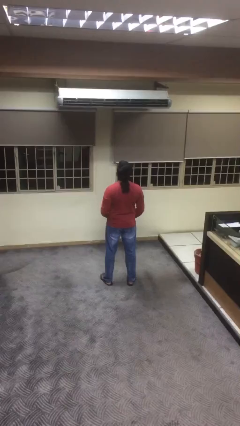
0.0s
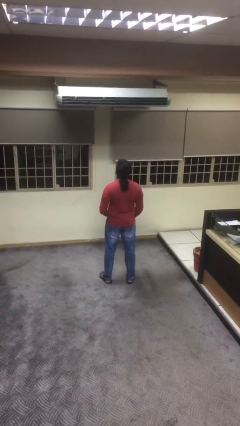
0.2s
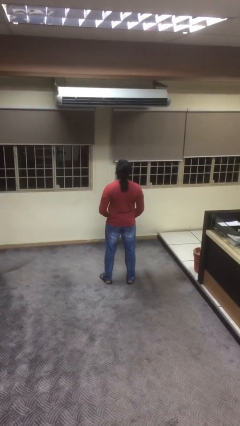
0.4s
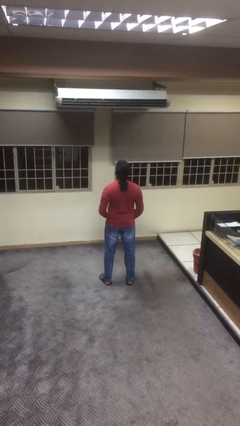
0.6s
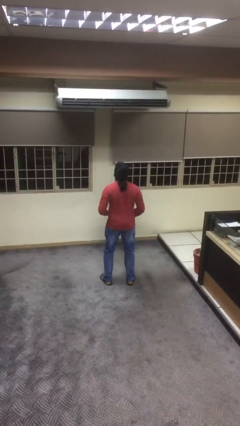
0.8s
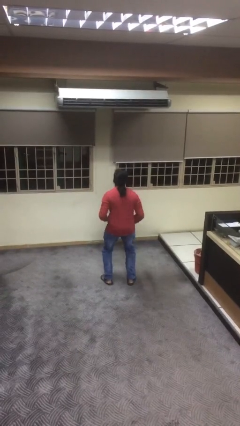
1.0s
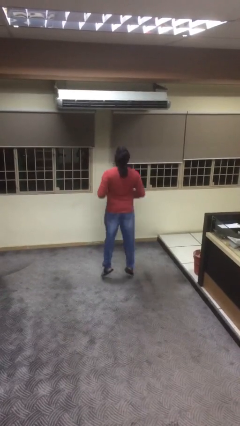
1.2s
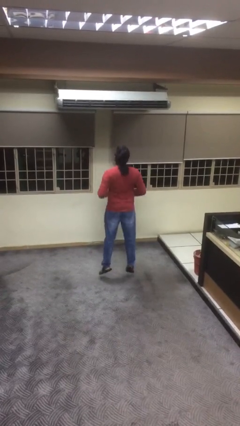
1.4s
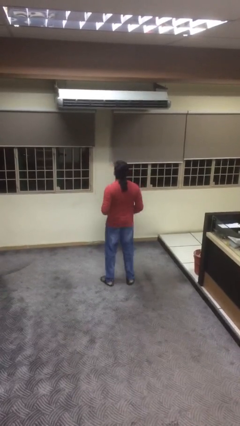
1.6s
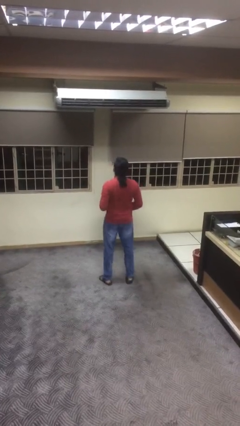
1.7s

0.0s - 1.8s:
person jumps

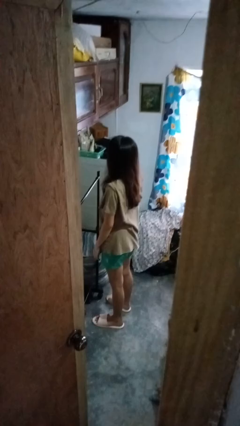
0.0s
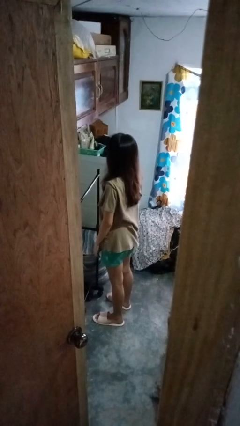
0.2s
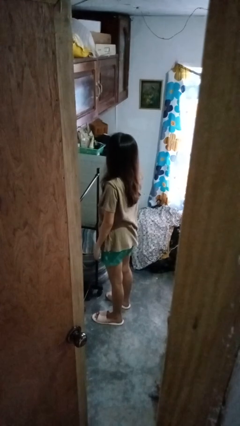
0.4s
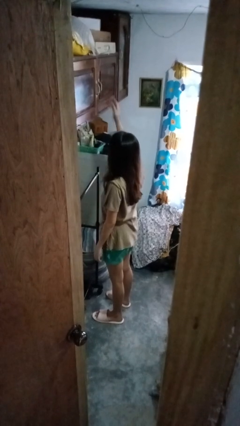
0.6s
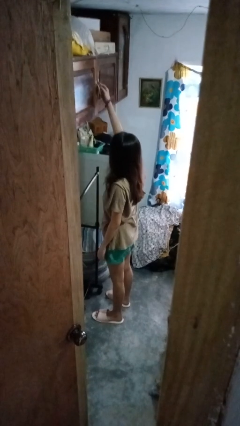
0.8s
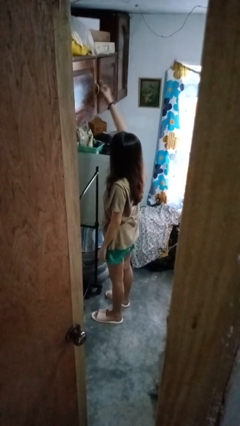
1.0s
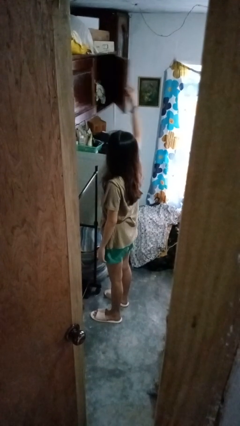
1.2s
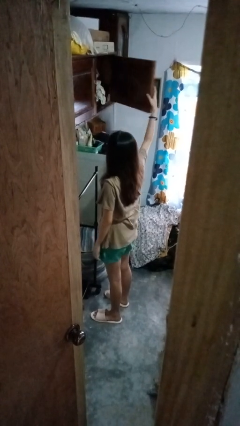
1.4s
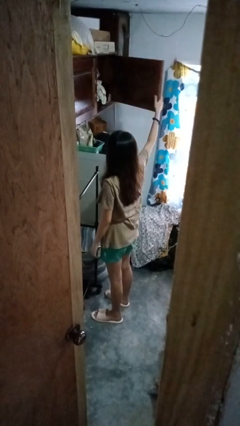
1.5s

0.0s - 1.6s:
person opens closet door

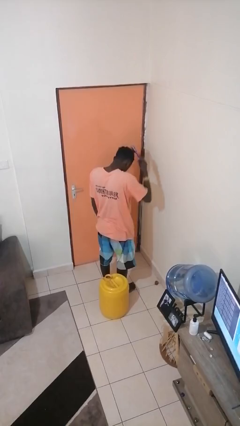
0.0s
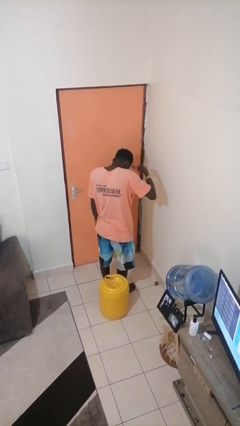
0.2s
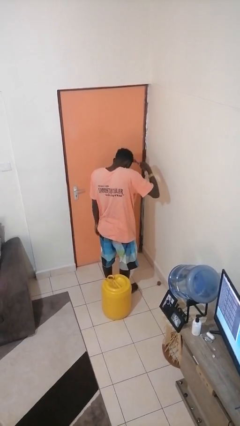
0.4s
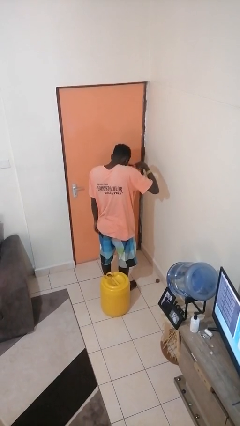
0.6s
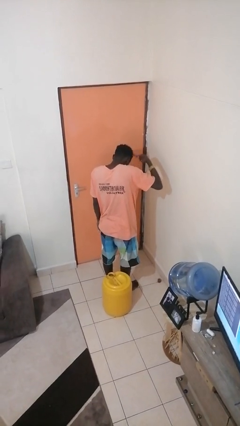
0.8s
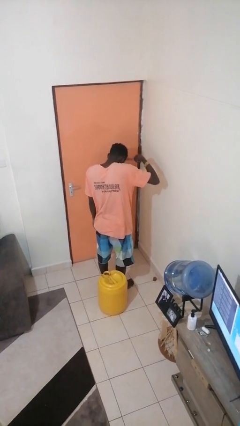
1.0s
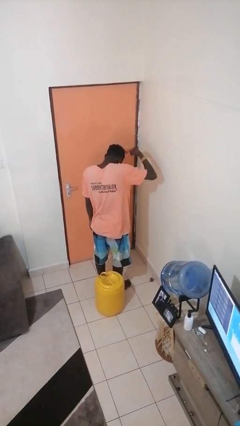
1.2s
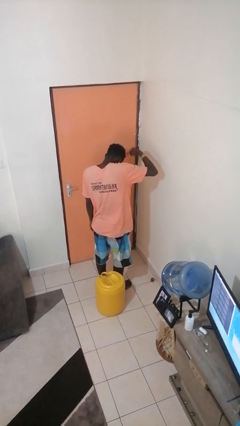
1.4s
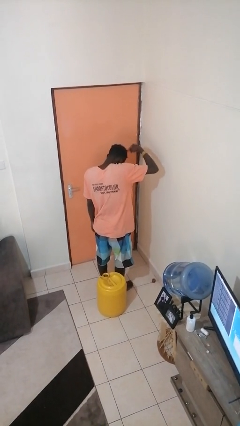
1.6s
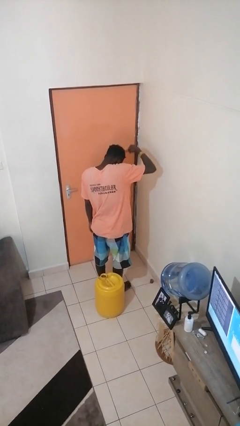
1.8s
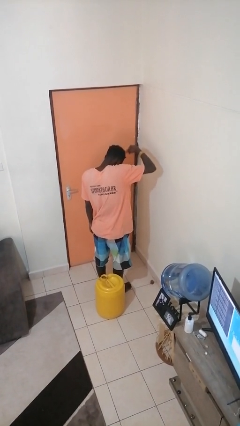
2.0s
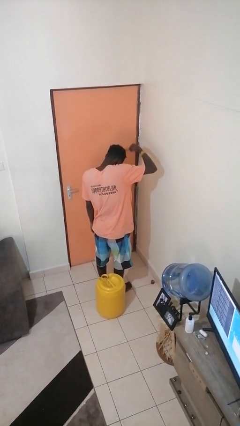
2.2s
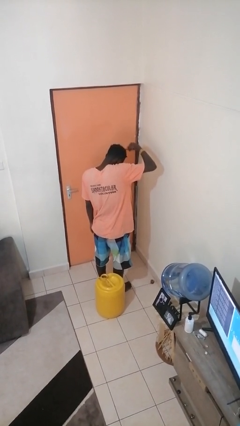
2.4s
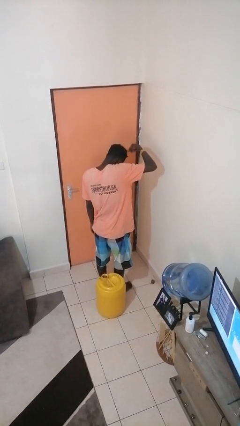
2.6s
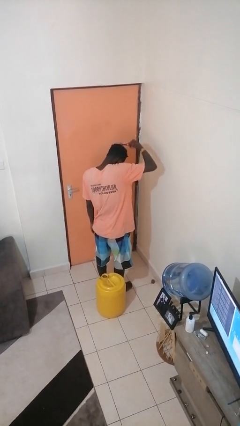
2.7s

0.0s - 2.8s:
person brushes hair

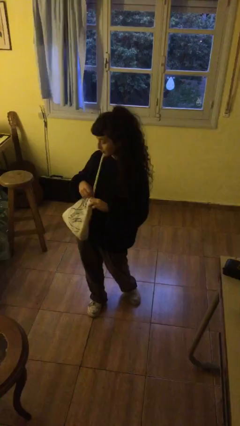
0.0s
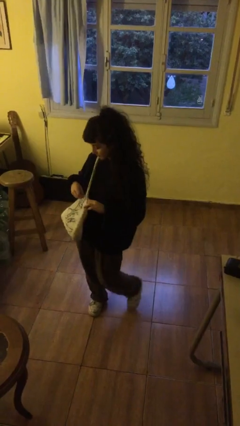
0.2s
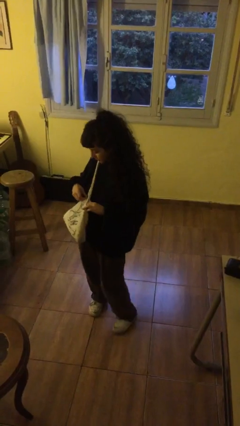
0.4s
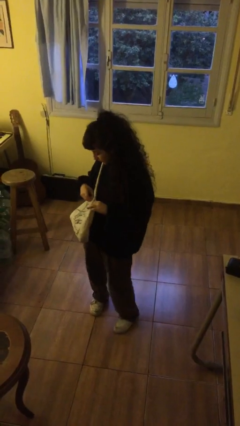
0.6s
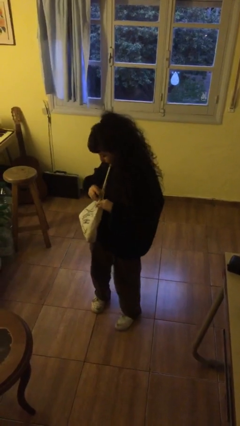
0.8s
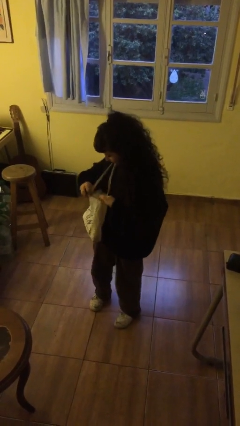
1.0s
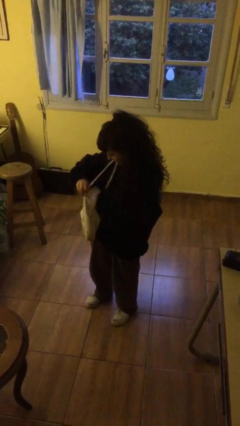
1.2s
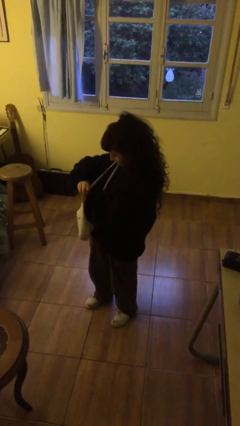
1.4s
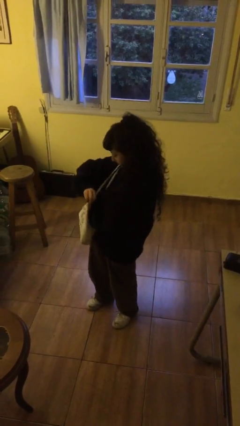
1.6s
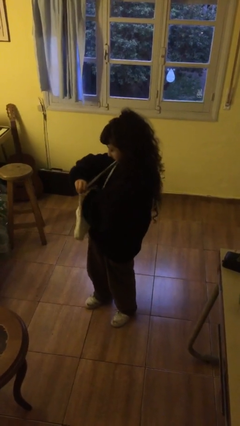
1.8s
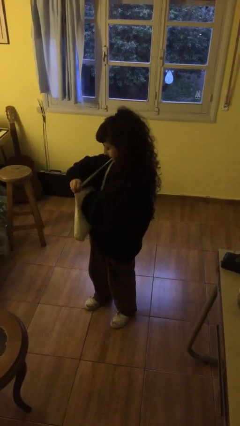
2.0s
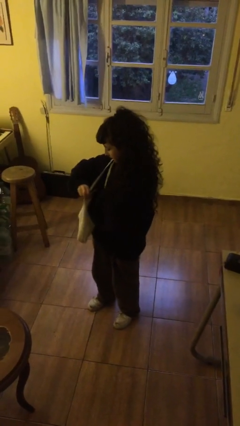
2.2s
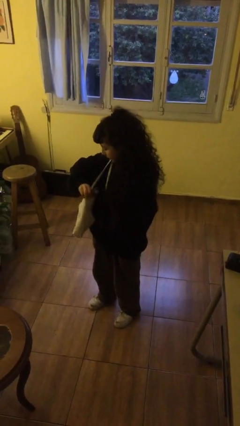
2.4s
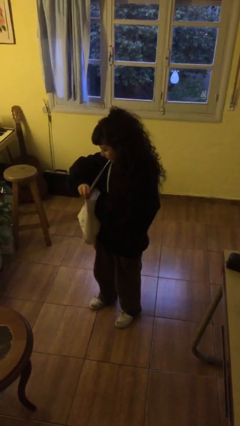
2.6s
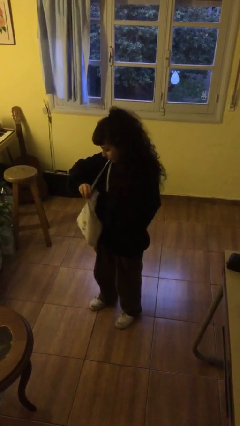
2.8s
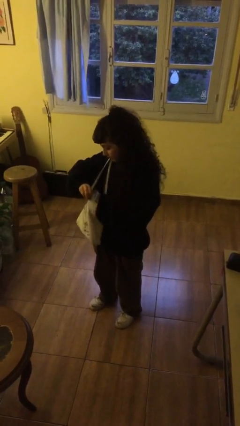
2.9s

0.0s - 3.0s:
person searches in purse

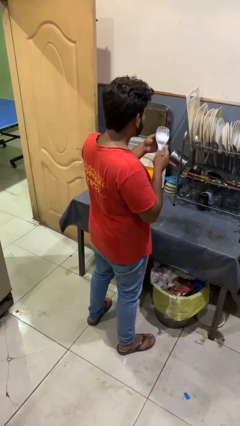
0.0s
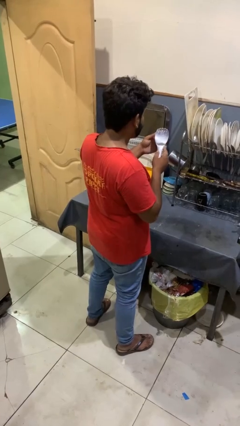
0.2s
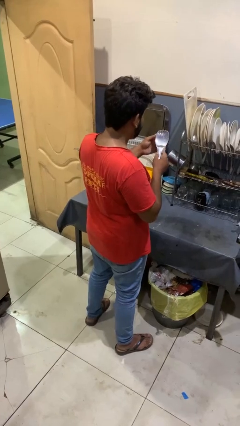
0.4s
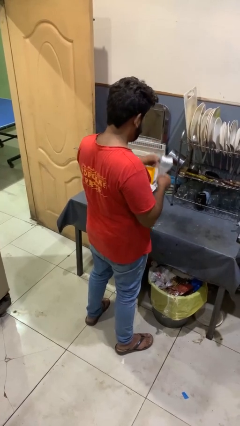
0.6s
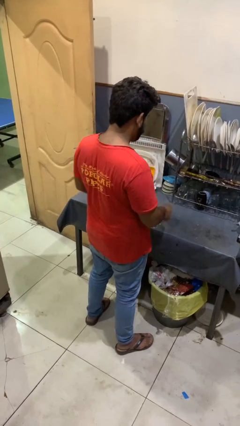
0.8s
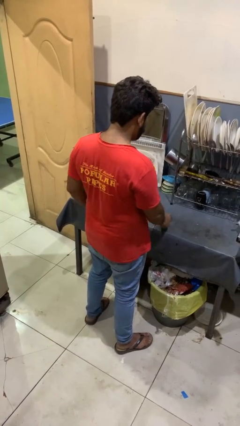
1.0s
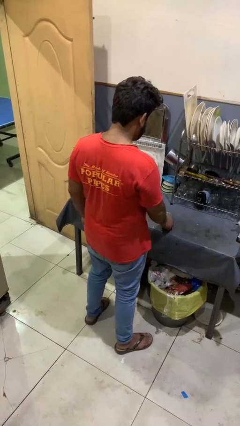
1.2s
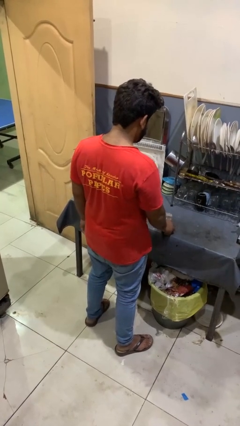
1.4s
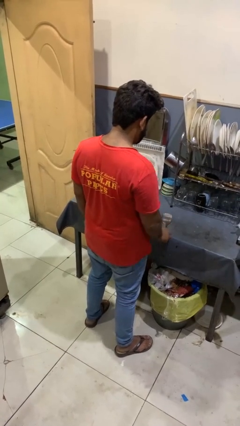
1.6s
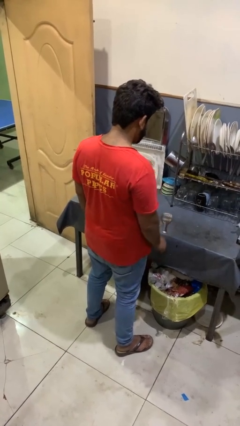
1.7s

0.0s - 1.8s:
person puts down object on countertop

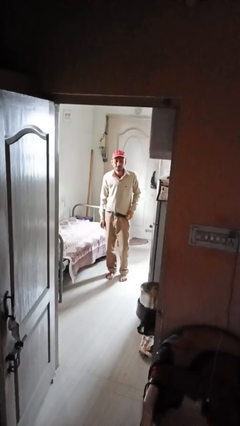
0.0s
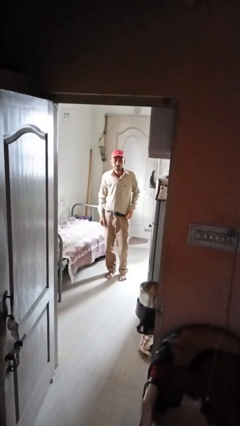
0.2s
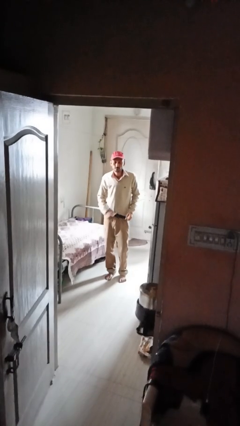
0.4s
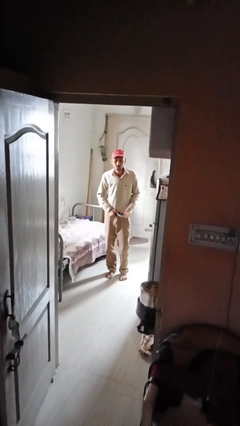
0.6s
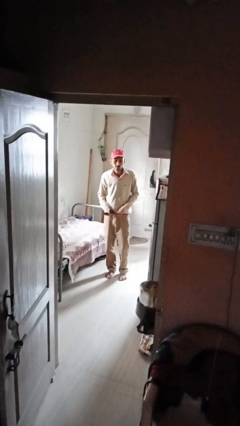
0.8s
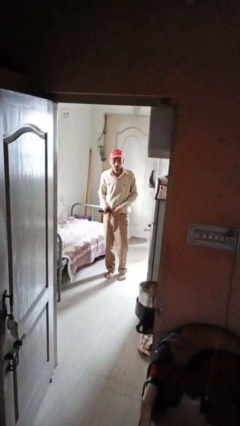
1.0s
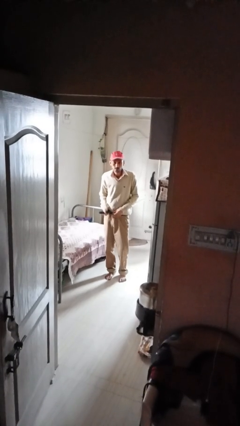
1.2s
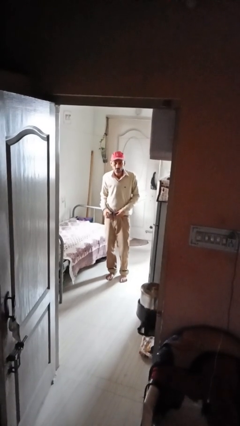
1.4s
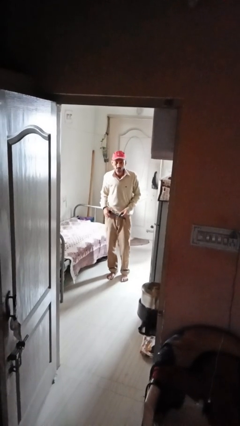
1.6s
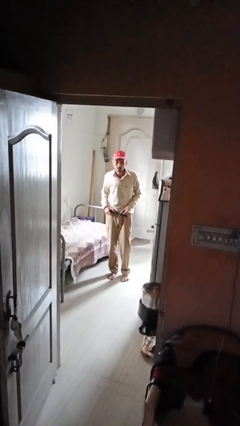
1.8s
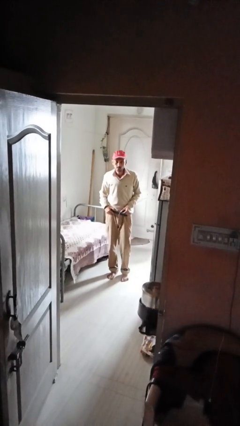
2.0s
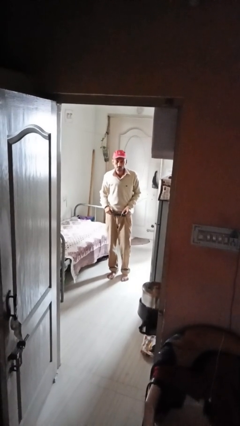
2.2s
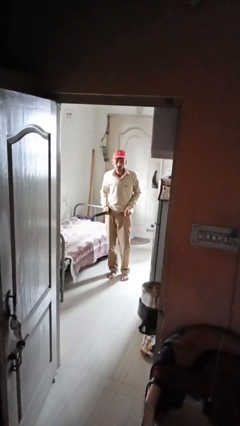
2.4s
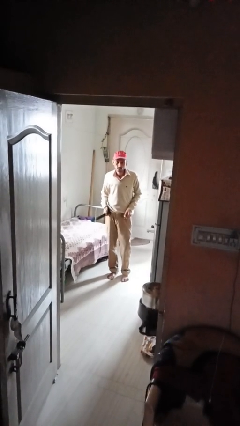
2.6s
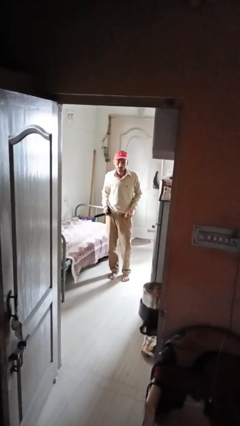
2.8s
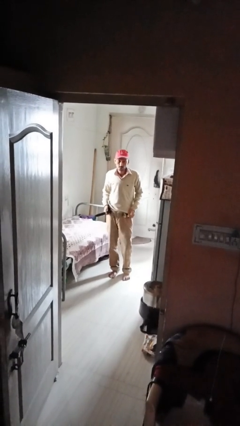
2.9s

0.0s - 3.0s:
person takes off belt

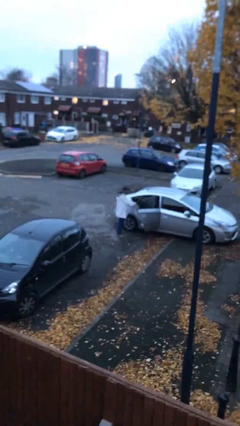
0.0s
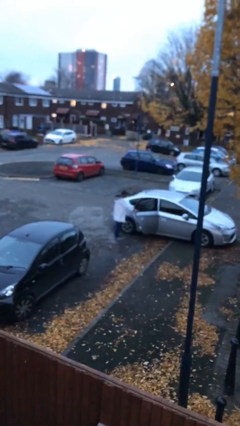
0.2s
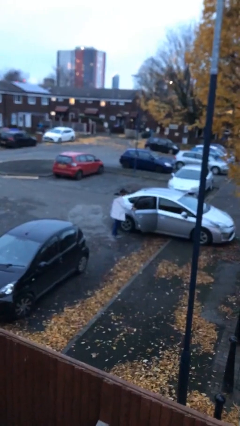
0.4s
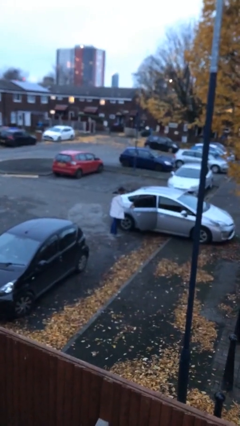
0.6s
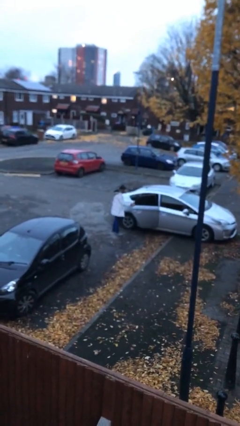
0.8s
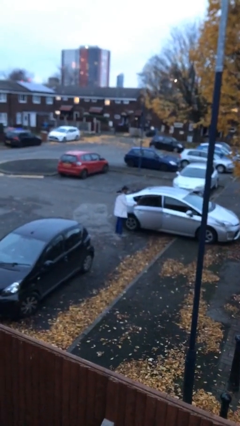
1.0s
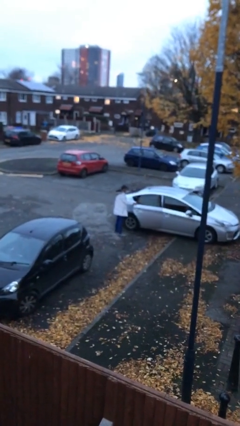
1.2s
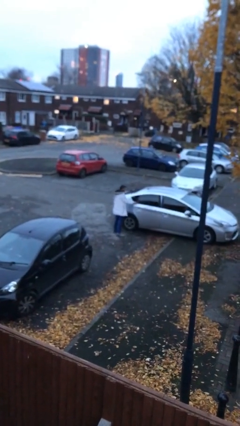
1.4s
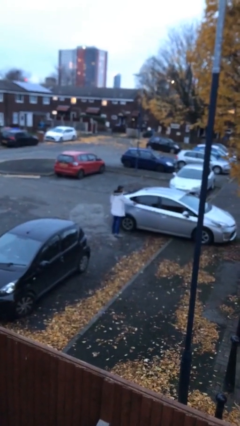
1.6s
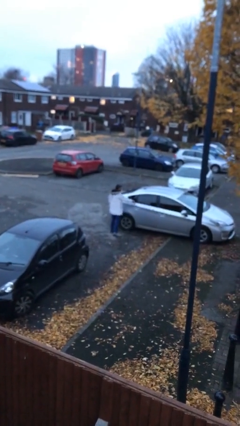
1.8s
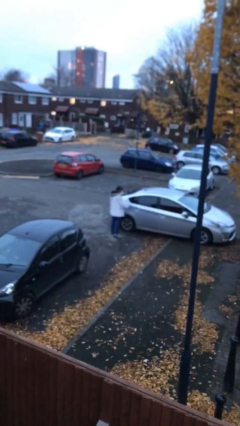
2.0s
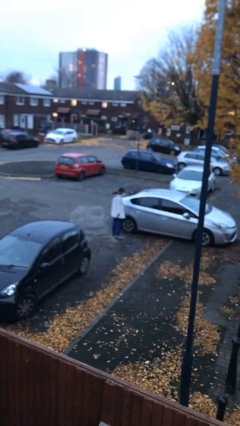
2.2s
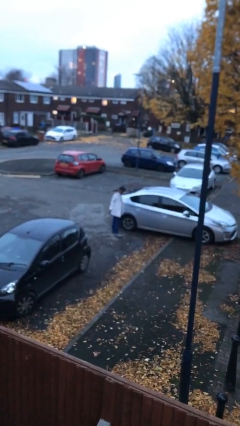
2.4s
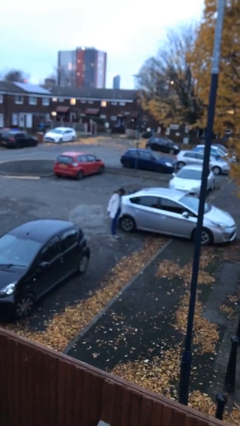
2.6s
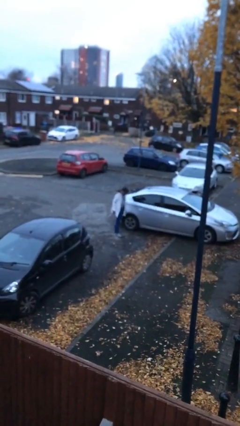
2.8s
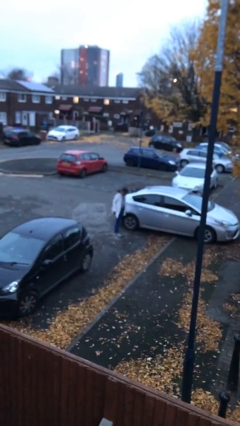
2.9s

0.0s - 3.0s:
person closes car door

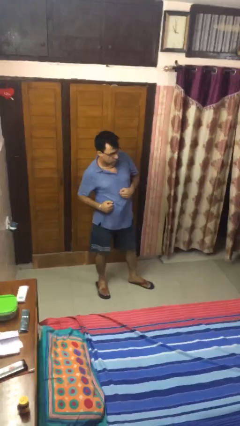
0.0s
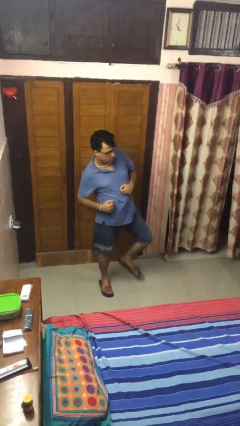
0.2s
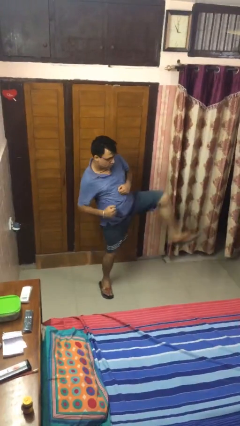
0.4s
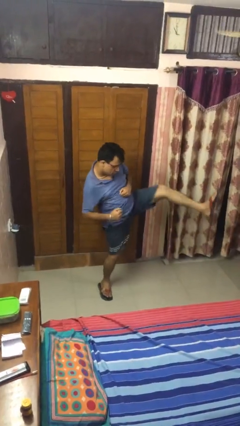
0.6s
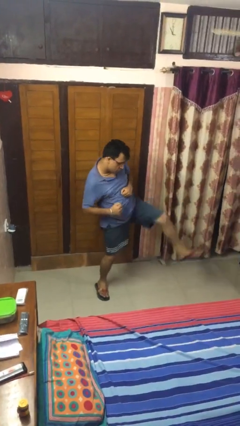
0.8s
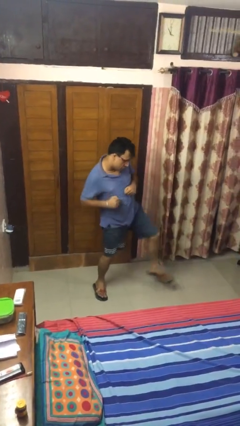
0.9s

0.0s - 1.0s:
person karate kicks
